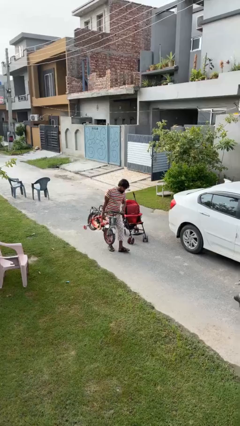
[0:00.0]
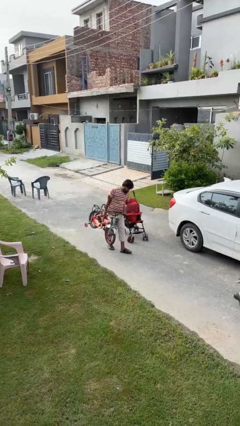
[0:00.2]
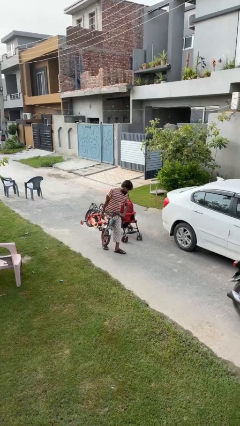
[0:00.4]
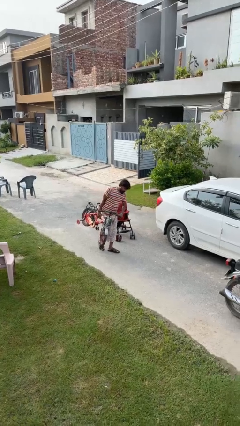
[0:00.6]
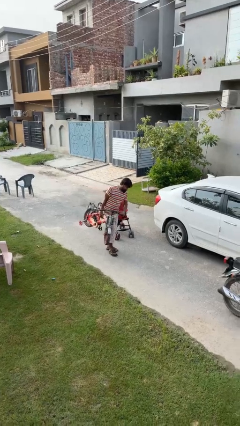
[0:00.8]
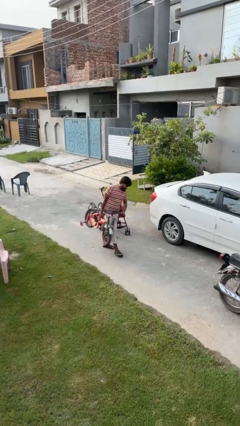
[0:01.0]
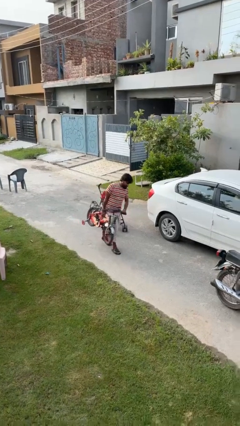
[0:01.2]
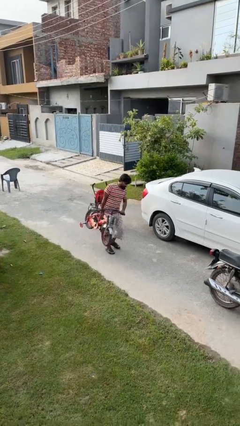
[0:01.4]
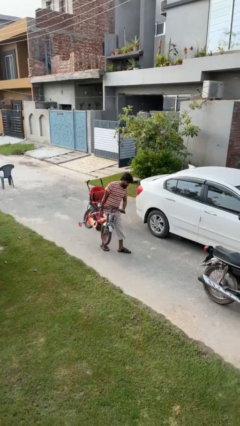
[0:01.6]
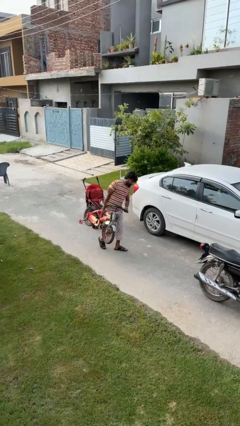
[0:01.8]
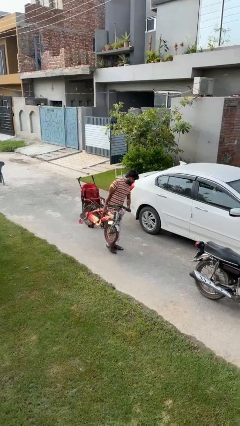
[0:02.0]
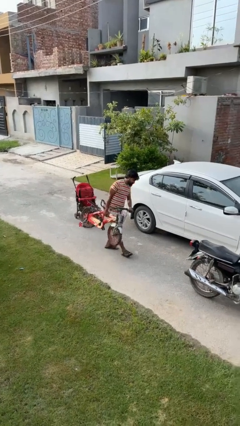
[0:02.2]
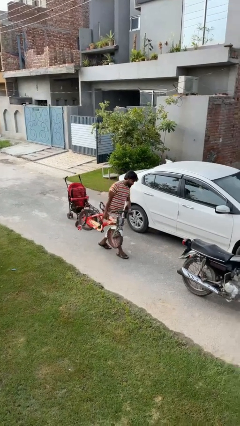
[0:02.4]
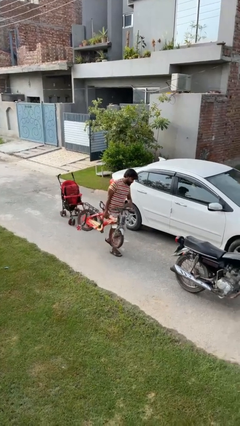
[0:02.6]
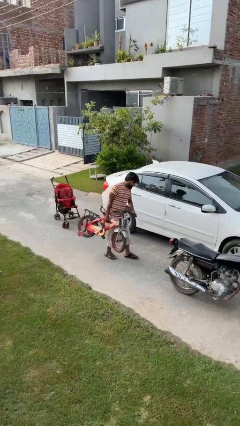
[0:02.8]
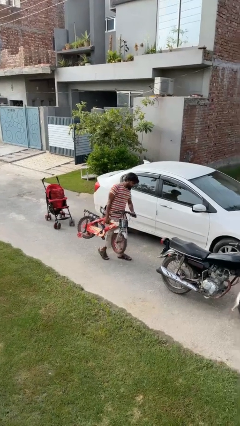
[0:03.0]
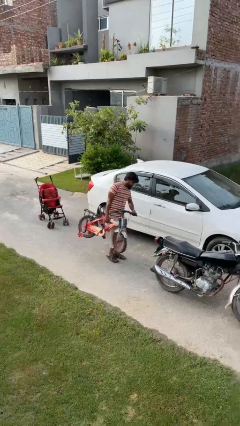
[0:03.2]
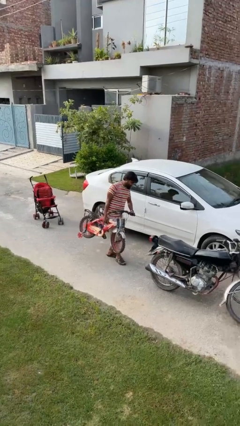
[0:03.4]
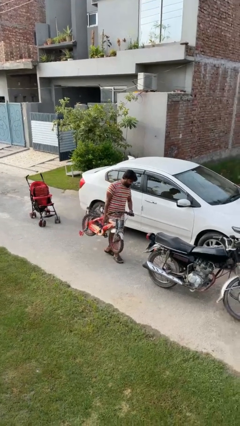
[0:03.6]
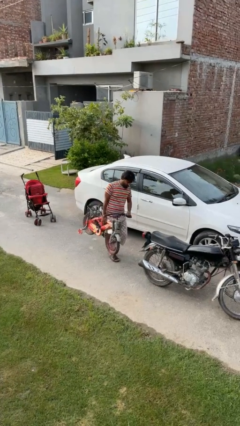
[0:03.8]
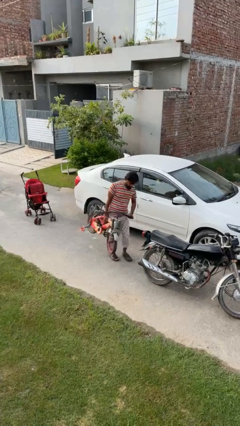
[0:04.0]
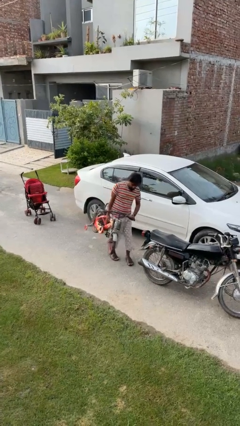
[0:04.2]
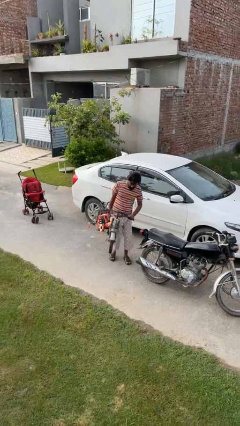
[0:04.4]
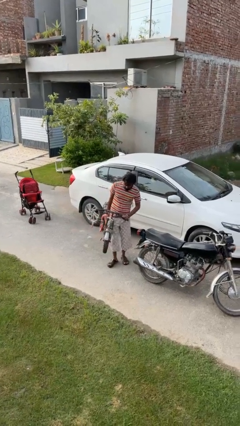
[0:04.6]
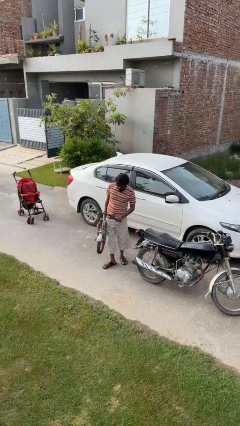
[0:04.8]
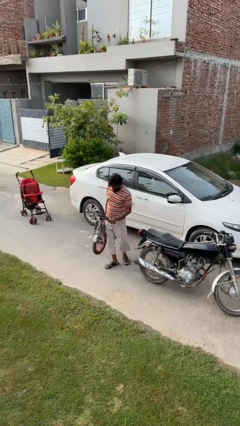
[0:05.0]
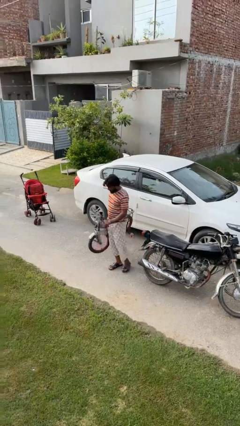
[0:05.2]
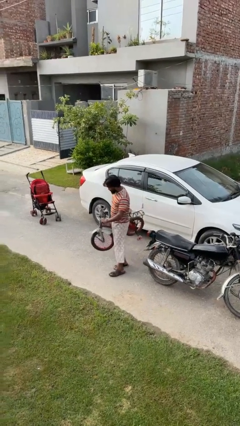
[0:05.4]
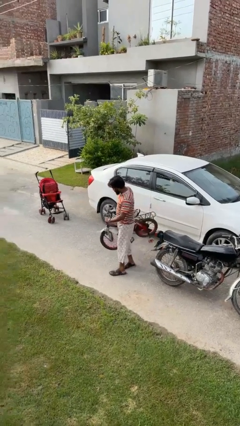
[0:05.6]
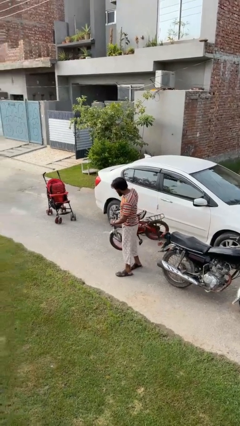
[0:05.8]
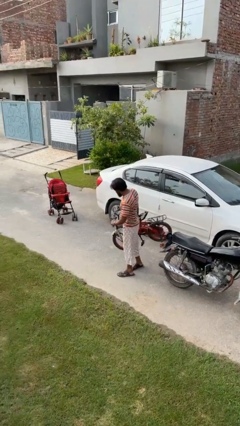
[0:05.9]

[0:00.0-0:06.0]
person carries bicycle

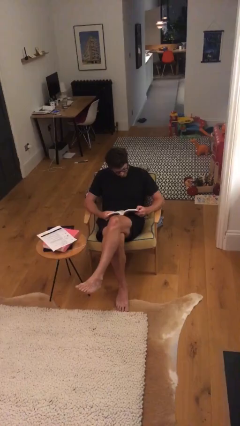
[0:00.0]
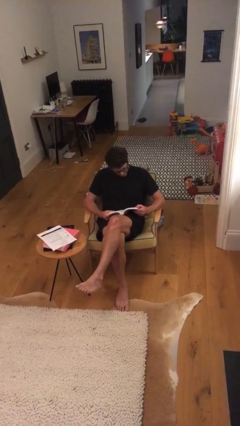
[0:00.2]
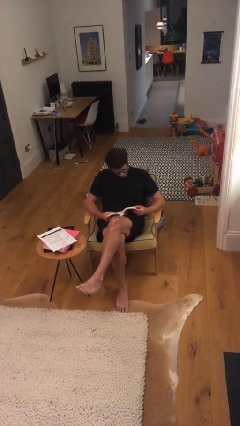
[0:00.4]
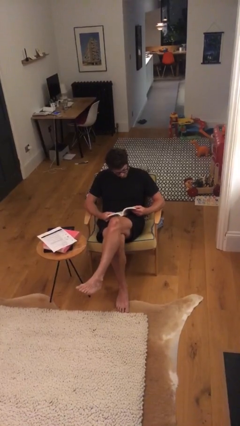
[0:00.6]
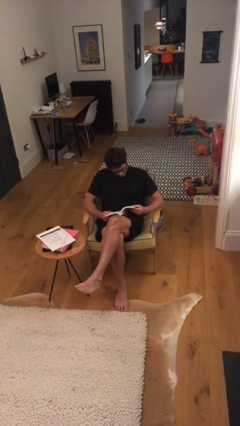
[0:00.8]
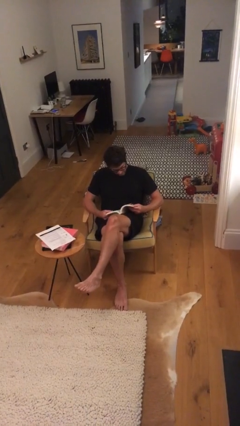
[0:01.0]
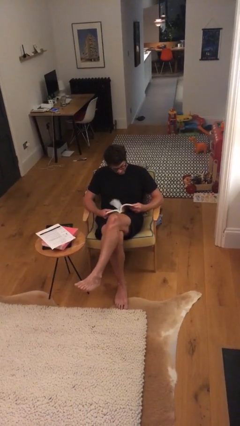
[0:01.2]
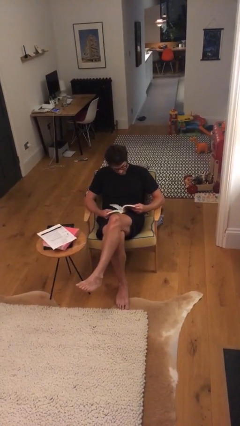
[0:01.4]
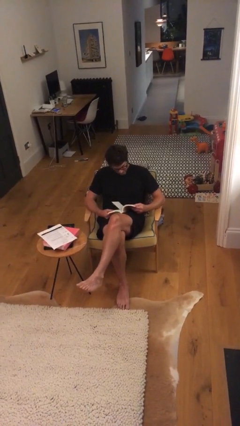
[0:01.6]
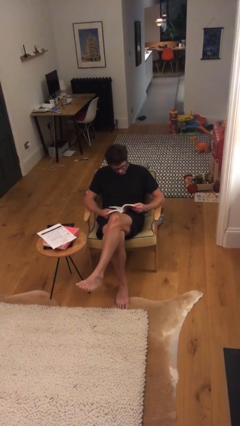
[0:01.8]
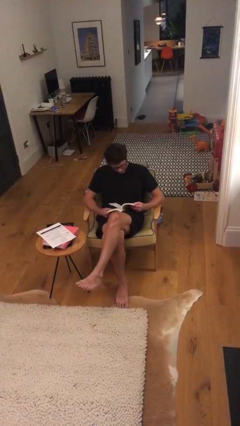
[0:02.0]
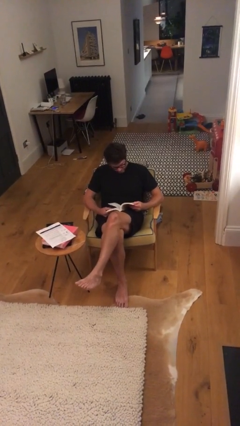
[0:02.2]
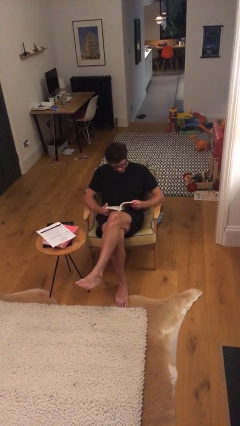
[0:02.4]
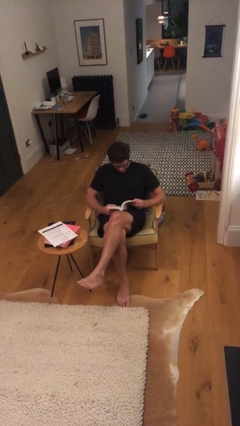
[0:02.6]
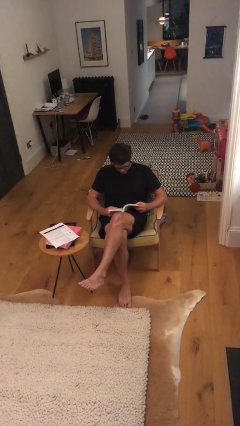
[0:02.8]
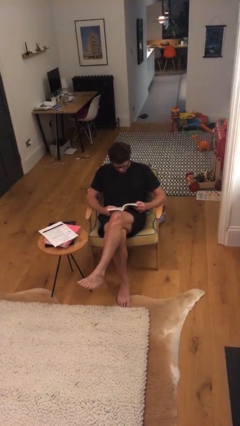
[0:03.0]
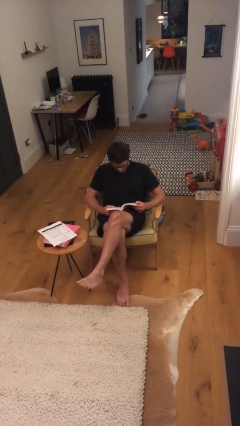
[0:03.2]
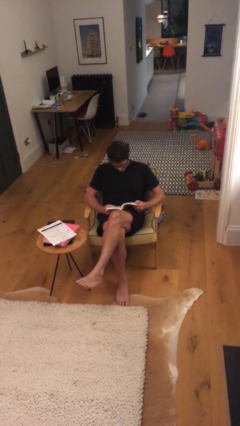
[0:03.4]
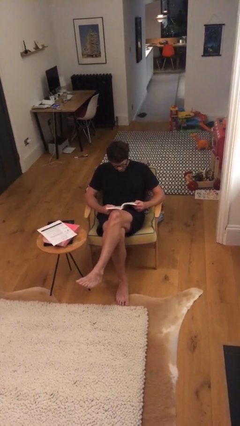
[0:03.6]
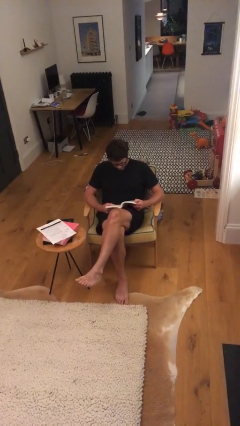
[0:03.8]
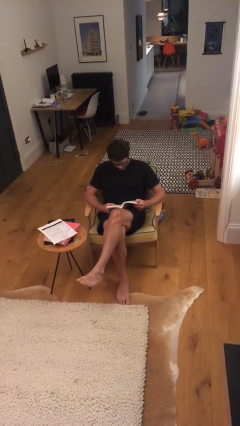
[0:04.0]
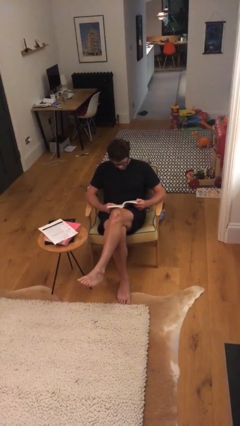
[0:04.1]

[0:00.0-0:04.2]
person reads document

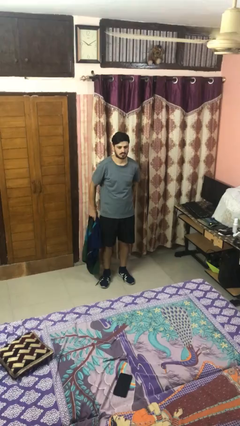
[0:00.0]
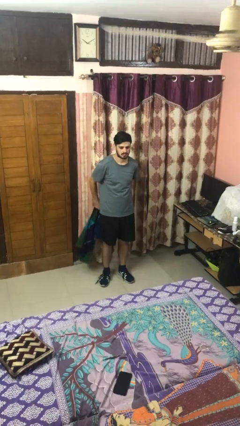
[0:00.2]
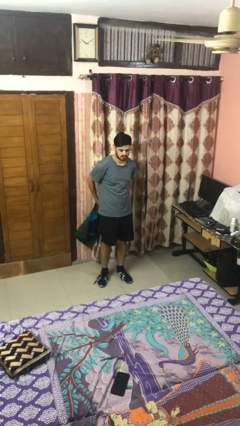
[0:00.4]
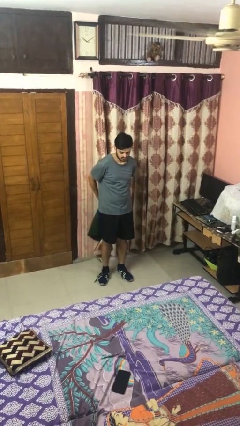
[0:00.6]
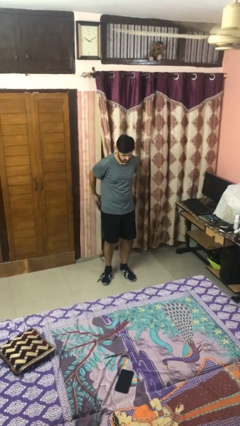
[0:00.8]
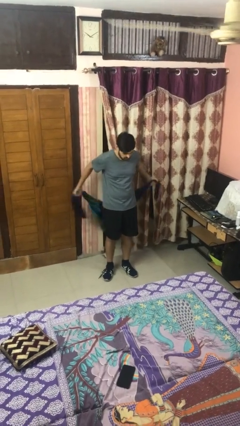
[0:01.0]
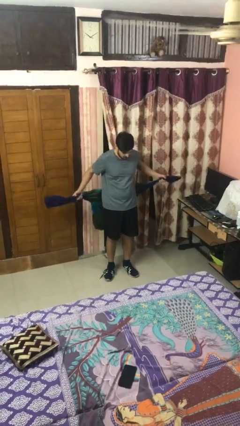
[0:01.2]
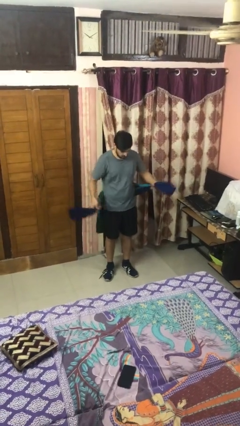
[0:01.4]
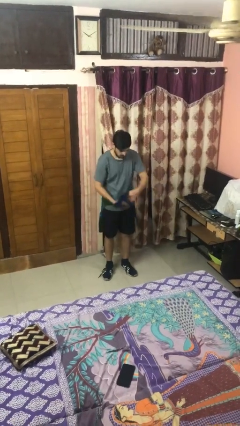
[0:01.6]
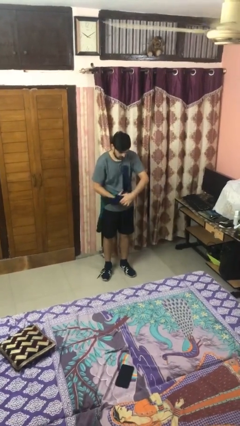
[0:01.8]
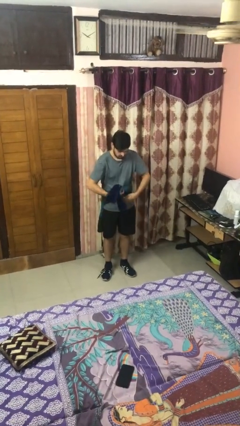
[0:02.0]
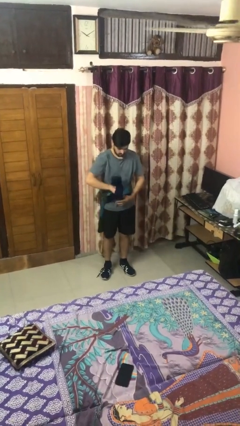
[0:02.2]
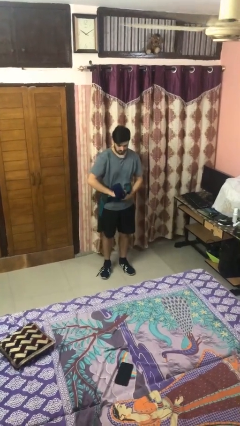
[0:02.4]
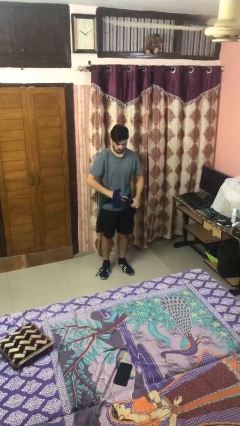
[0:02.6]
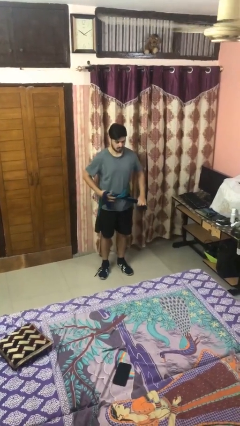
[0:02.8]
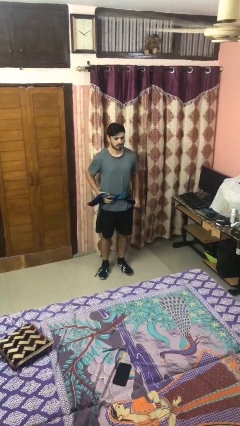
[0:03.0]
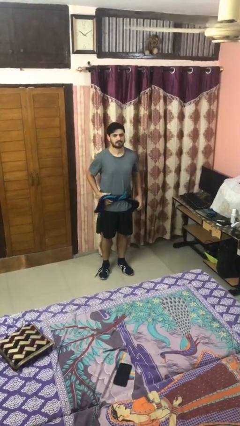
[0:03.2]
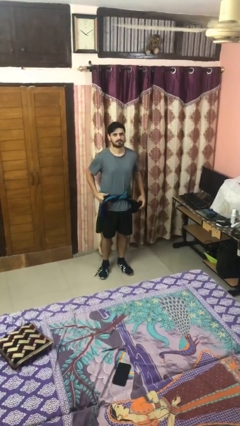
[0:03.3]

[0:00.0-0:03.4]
person ties jacket around waist

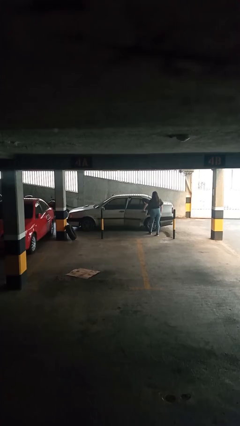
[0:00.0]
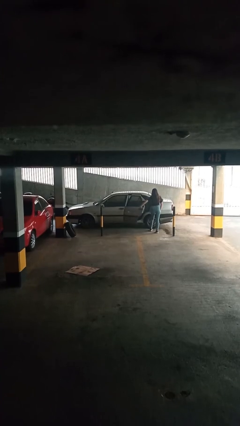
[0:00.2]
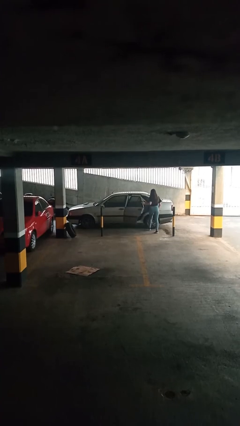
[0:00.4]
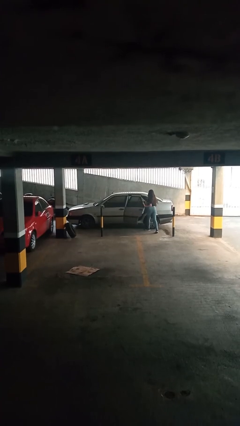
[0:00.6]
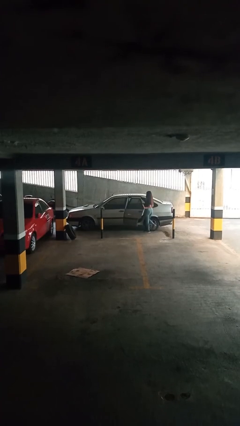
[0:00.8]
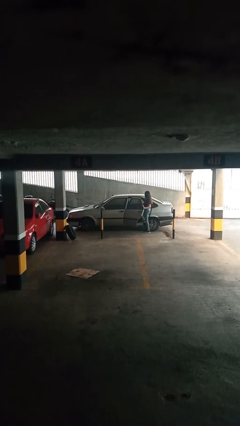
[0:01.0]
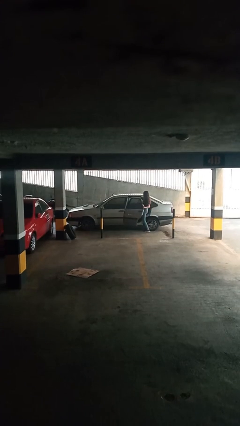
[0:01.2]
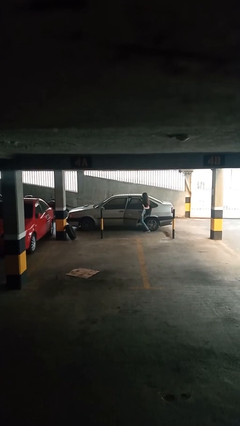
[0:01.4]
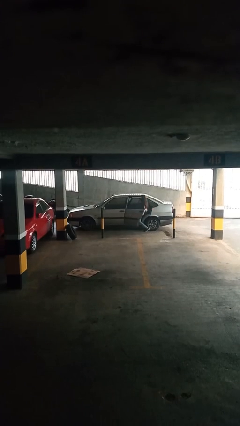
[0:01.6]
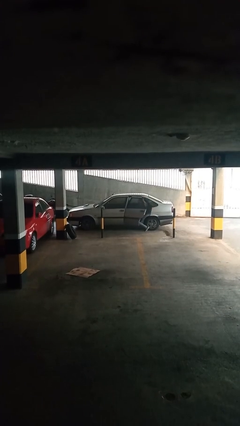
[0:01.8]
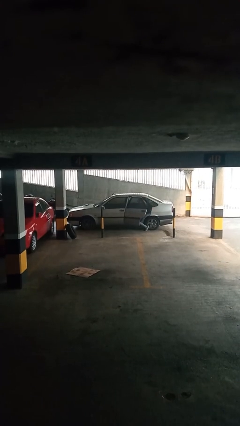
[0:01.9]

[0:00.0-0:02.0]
car picks up person

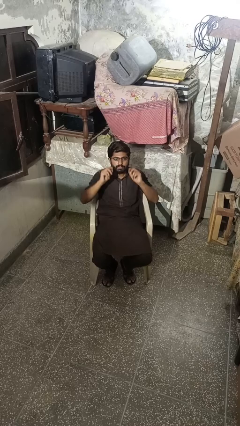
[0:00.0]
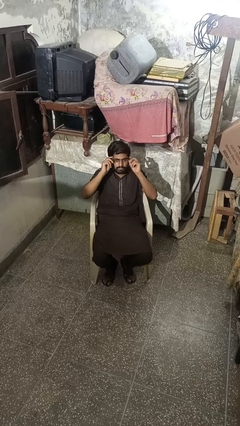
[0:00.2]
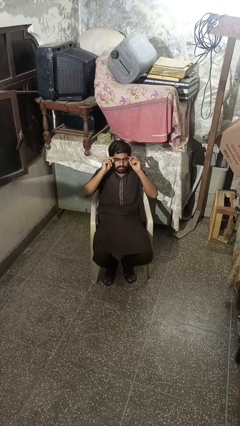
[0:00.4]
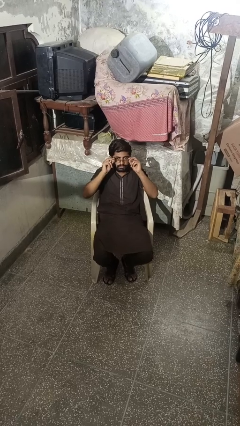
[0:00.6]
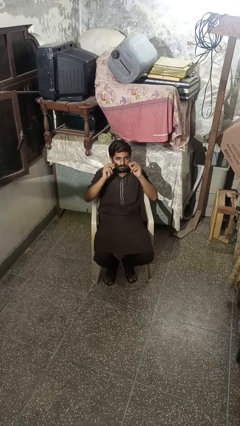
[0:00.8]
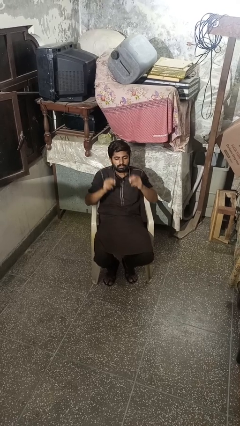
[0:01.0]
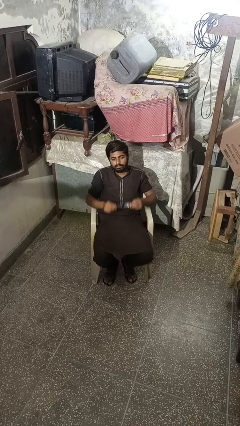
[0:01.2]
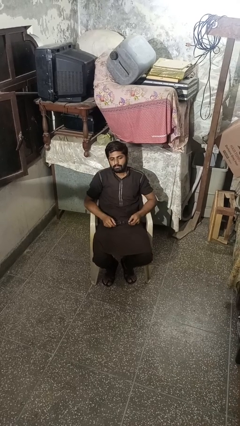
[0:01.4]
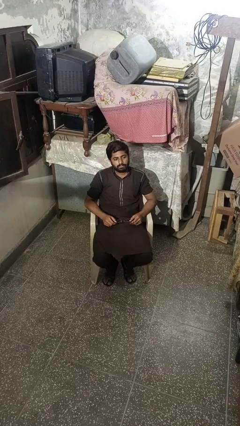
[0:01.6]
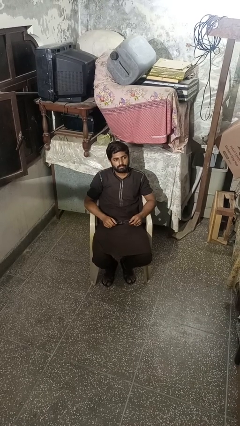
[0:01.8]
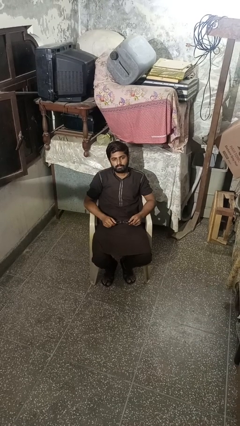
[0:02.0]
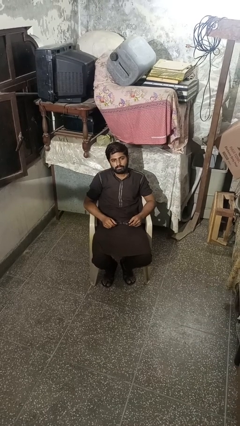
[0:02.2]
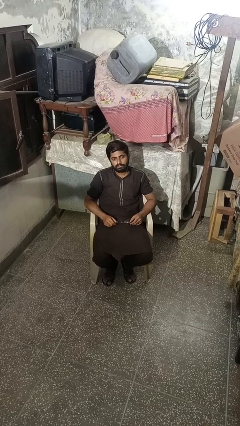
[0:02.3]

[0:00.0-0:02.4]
person takes off glasses
